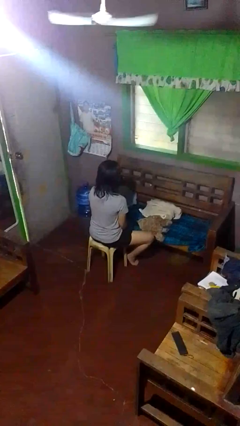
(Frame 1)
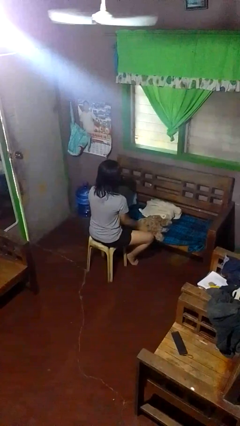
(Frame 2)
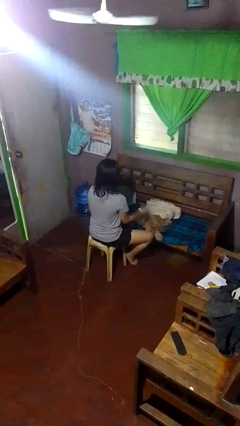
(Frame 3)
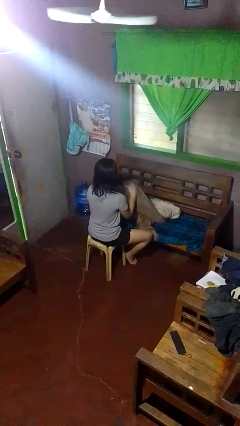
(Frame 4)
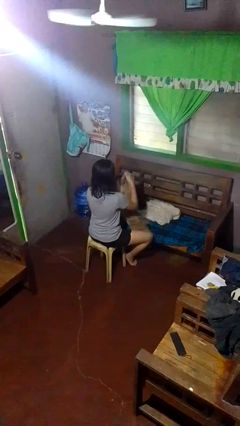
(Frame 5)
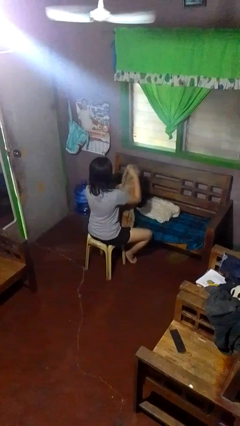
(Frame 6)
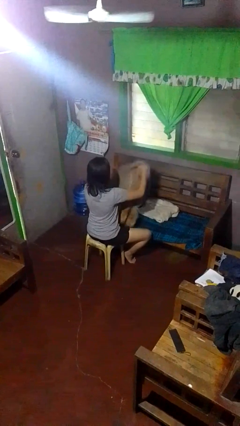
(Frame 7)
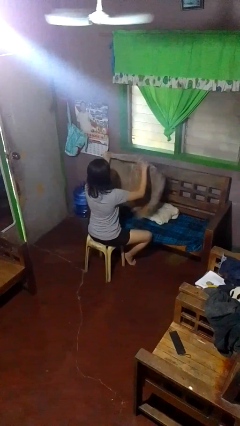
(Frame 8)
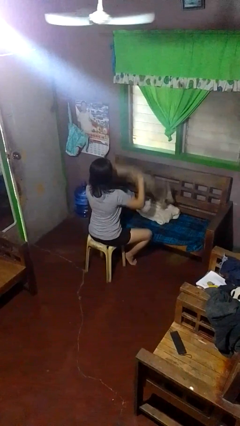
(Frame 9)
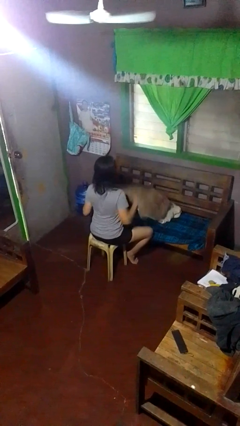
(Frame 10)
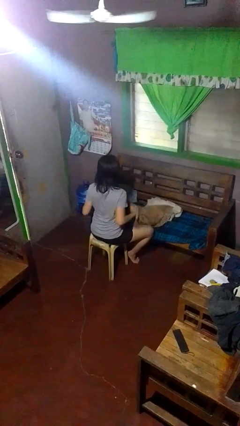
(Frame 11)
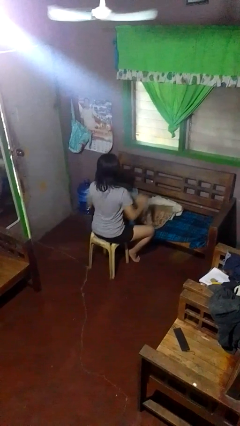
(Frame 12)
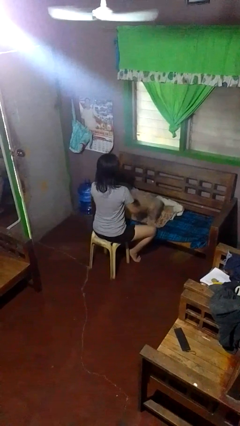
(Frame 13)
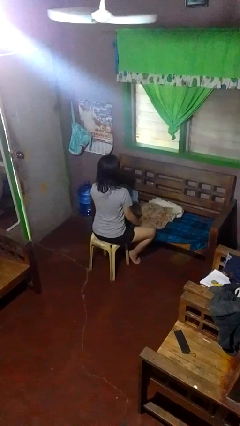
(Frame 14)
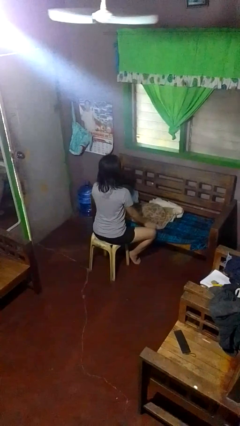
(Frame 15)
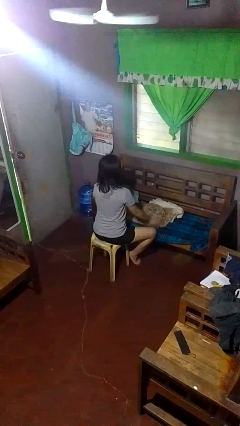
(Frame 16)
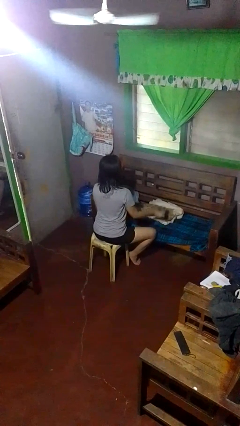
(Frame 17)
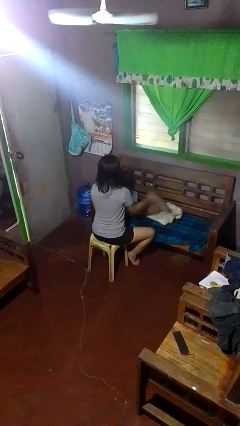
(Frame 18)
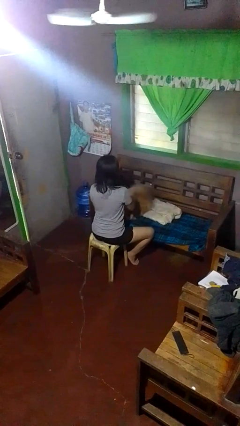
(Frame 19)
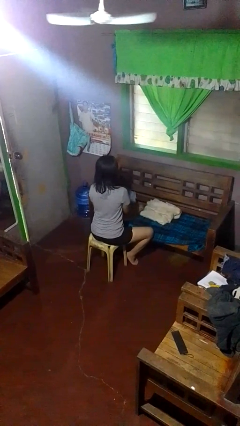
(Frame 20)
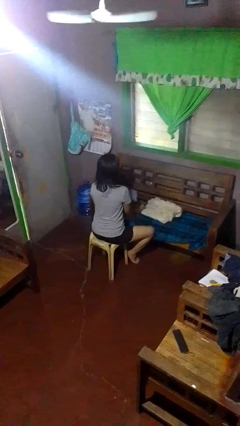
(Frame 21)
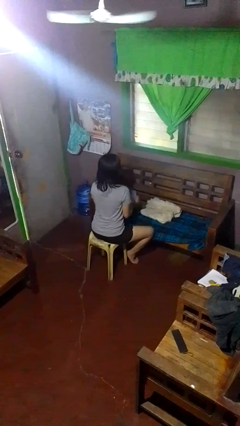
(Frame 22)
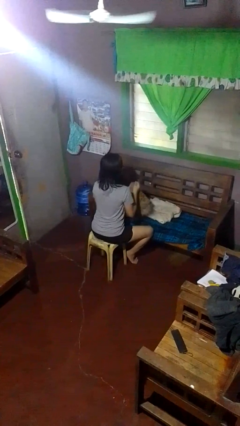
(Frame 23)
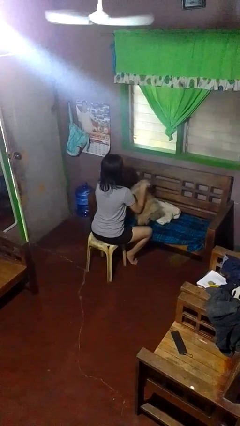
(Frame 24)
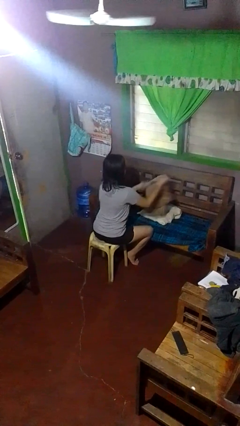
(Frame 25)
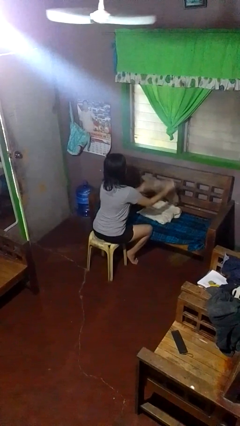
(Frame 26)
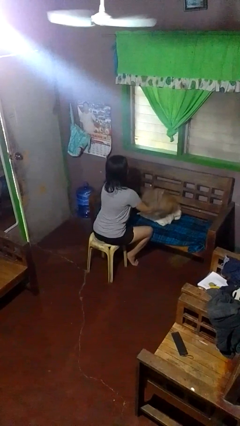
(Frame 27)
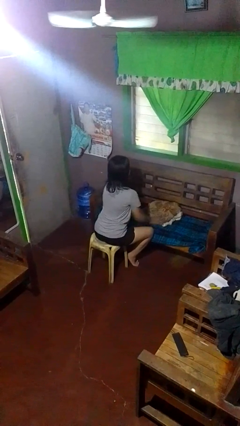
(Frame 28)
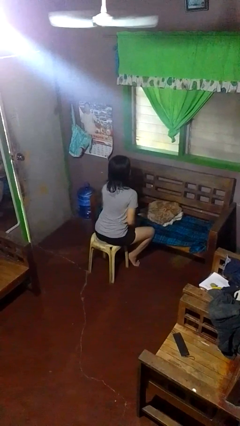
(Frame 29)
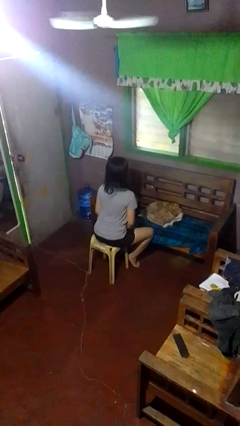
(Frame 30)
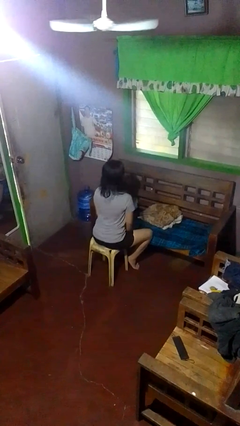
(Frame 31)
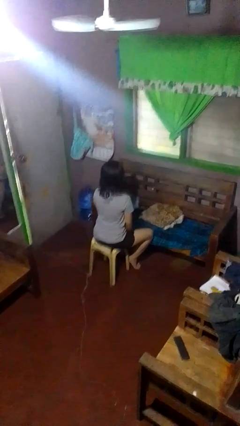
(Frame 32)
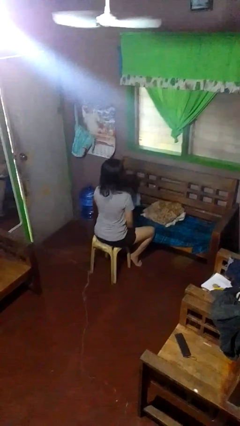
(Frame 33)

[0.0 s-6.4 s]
person folds towel

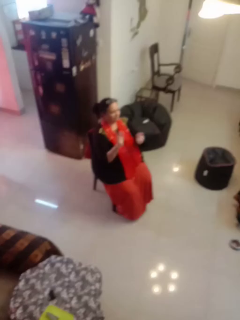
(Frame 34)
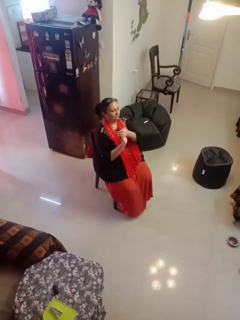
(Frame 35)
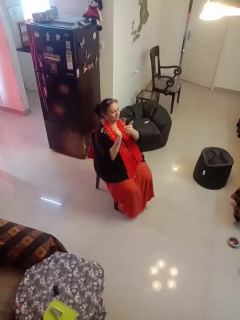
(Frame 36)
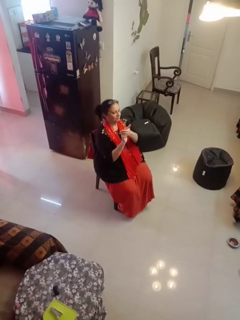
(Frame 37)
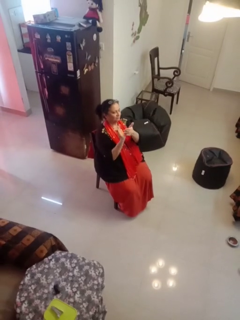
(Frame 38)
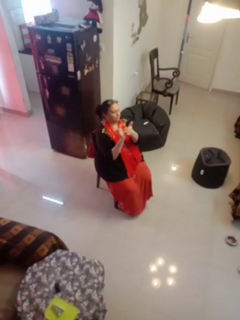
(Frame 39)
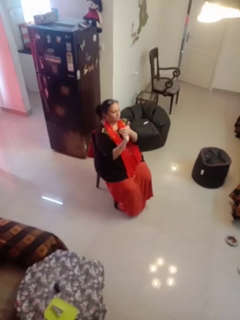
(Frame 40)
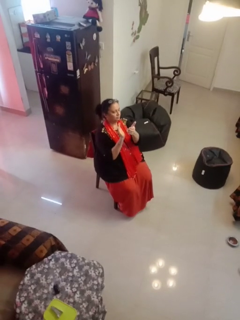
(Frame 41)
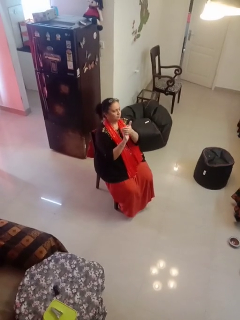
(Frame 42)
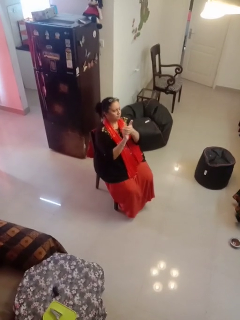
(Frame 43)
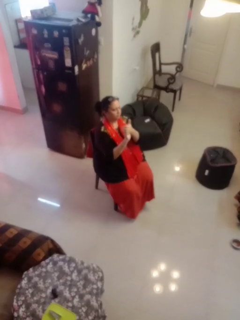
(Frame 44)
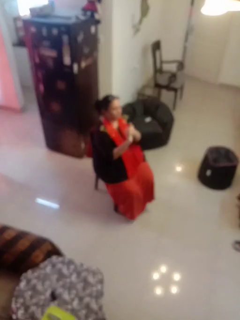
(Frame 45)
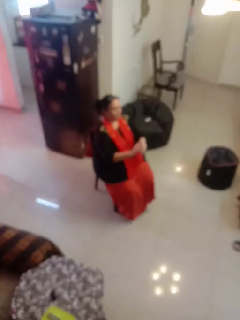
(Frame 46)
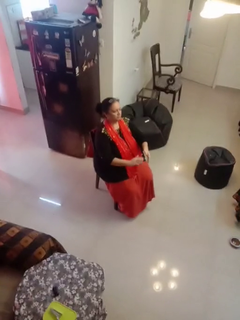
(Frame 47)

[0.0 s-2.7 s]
person claps hands

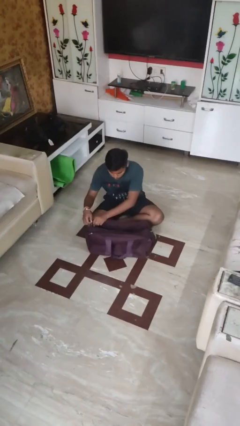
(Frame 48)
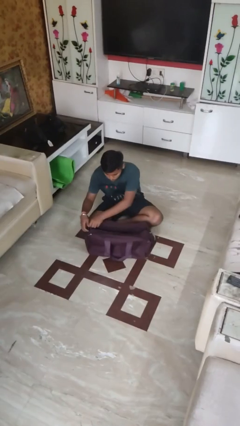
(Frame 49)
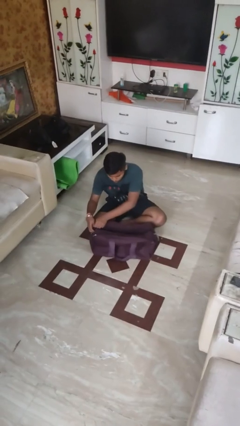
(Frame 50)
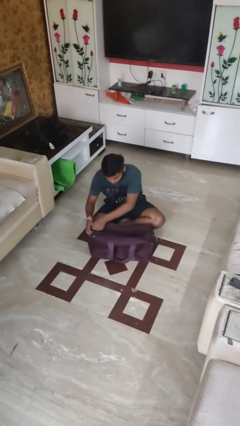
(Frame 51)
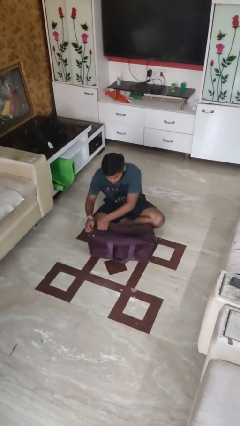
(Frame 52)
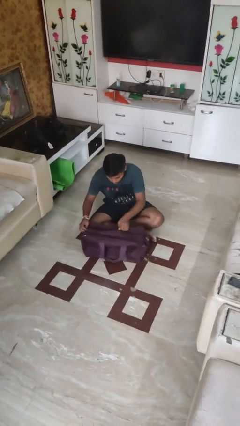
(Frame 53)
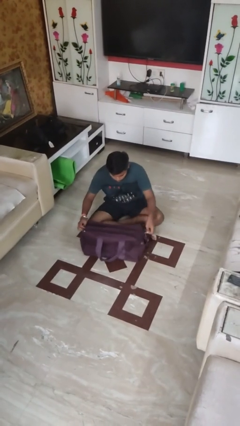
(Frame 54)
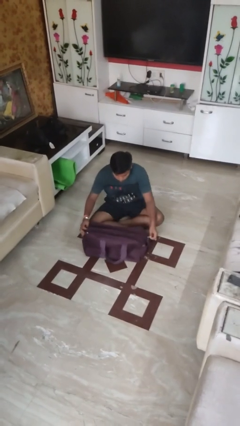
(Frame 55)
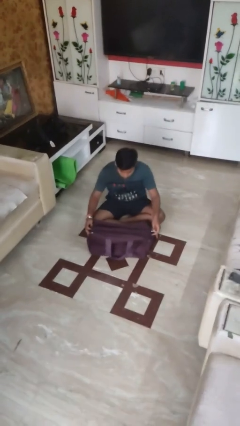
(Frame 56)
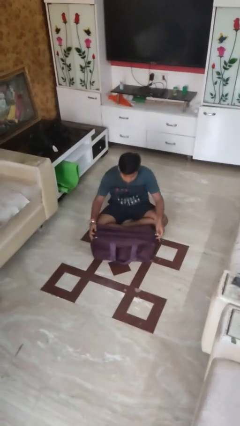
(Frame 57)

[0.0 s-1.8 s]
person closes suitcase

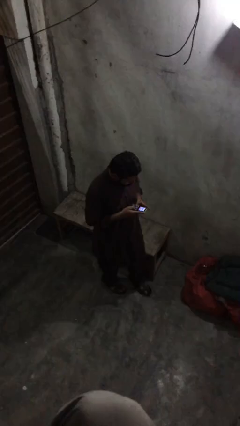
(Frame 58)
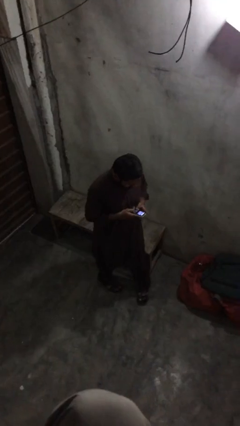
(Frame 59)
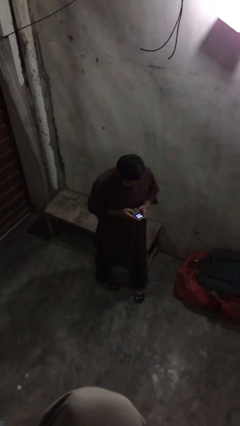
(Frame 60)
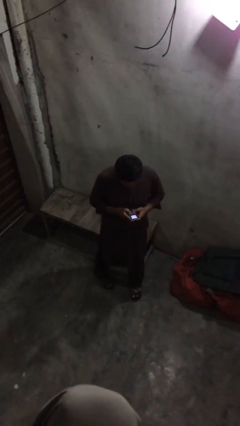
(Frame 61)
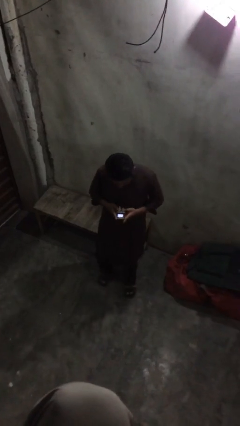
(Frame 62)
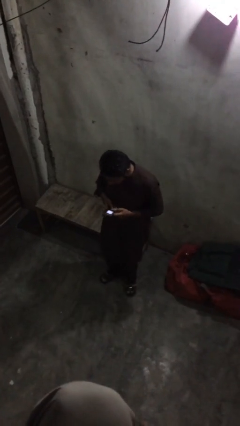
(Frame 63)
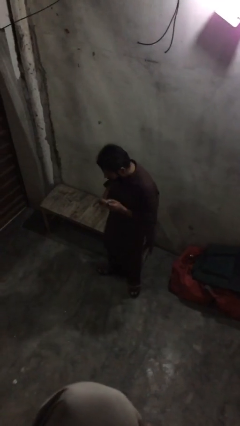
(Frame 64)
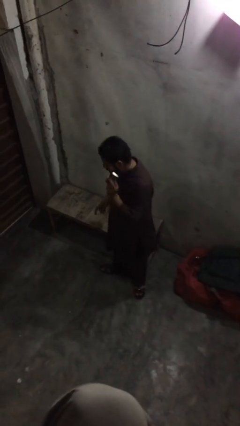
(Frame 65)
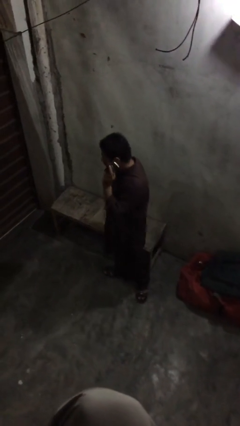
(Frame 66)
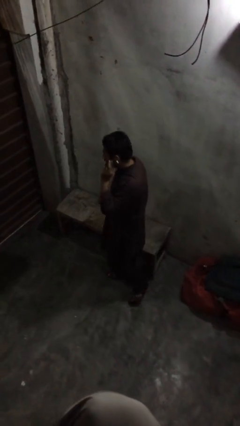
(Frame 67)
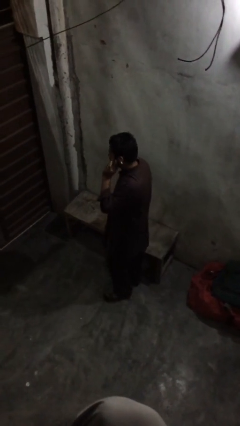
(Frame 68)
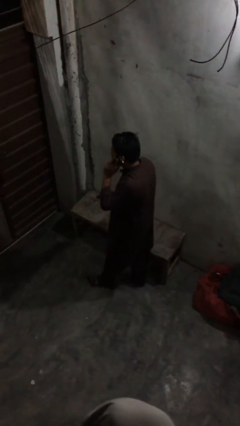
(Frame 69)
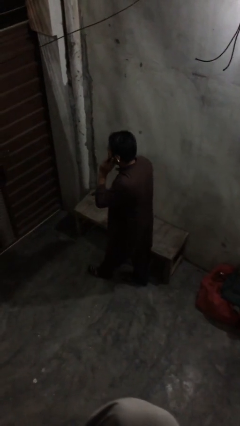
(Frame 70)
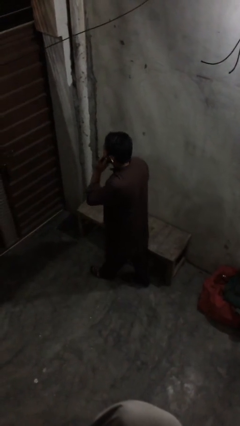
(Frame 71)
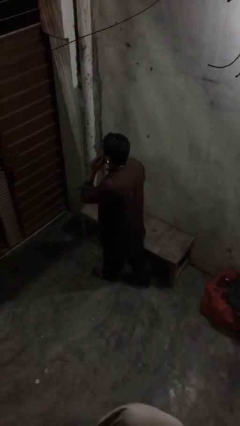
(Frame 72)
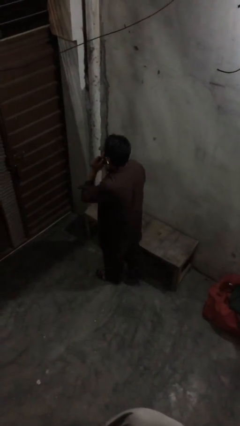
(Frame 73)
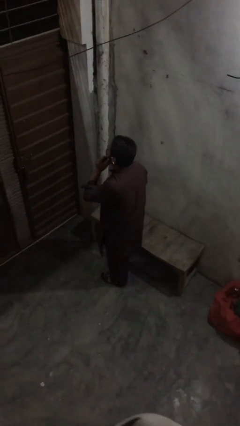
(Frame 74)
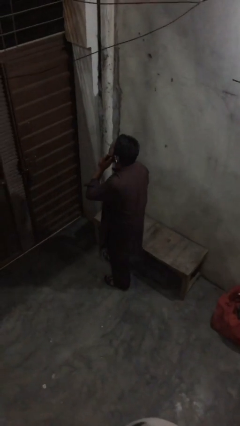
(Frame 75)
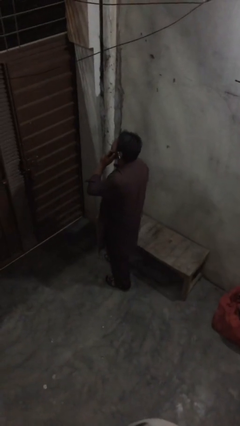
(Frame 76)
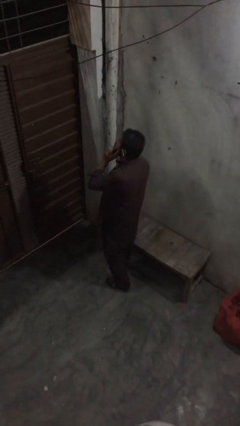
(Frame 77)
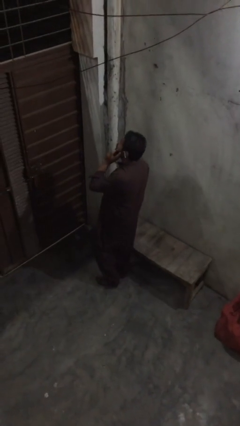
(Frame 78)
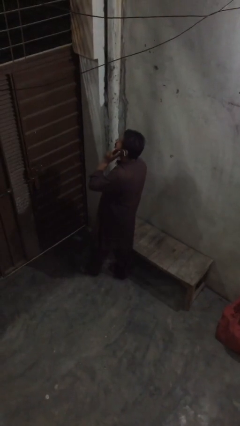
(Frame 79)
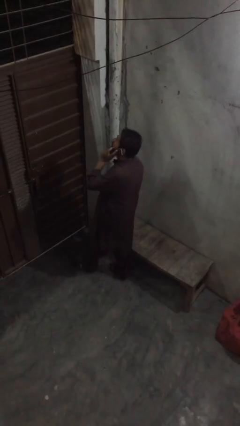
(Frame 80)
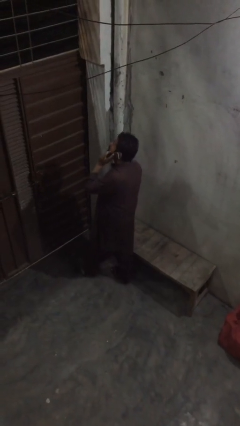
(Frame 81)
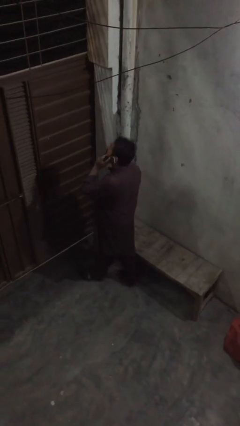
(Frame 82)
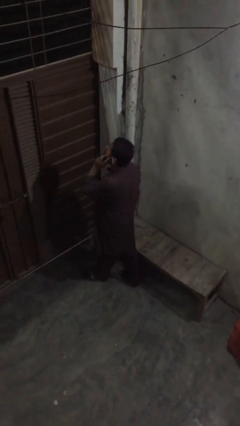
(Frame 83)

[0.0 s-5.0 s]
person talks on phone

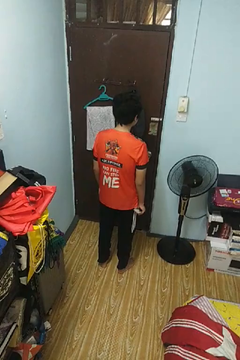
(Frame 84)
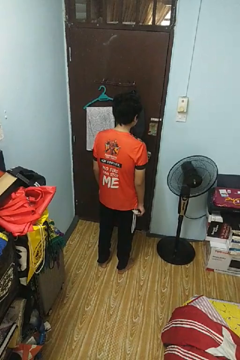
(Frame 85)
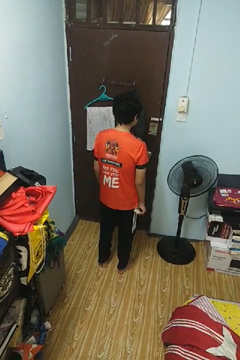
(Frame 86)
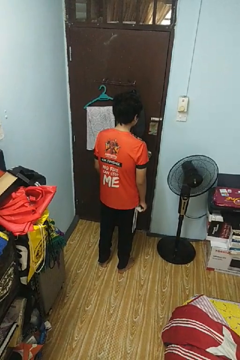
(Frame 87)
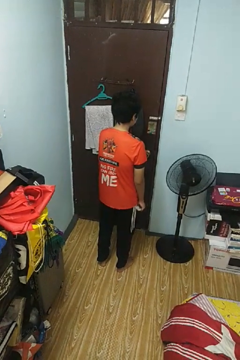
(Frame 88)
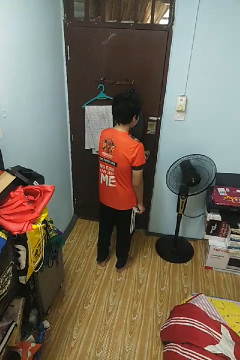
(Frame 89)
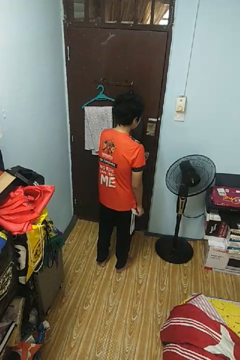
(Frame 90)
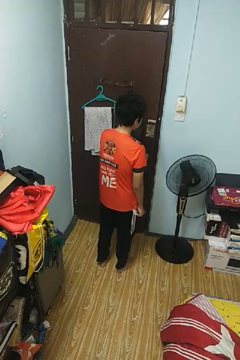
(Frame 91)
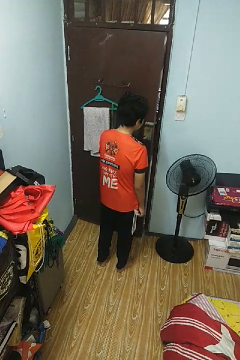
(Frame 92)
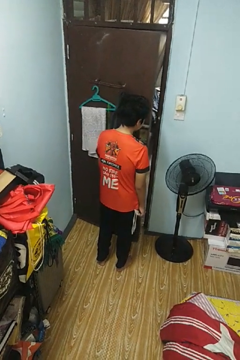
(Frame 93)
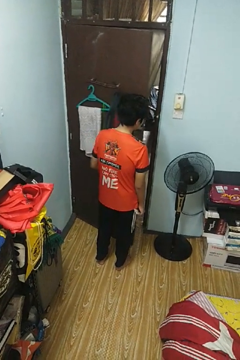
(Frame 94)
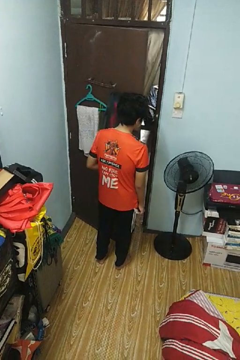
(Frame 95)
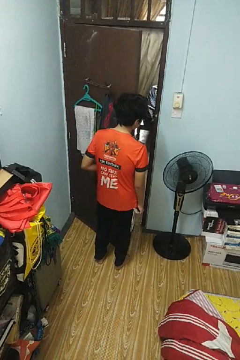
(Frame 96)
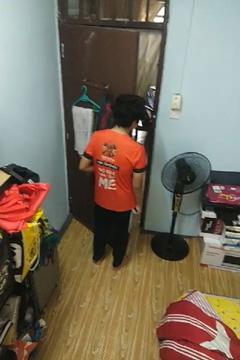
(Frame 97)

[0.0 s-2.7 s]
person opens facility door
